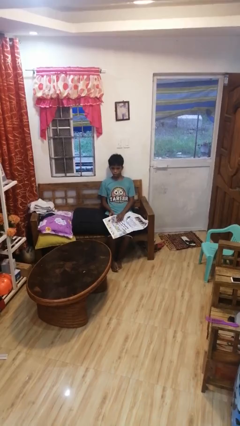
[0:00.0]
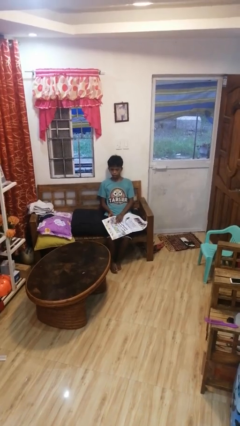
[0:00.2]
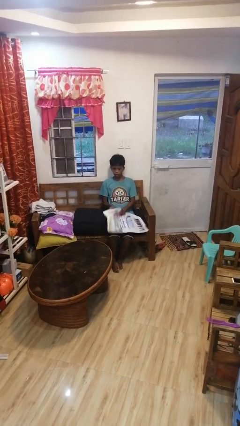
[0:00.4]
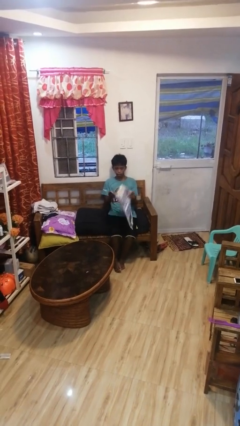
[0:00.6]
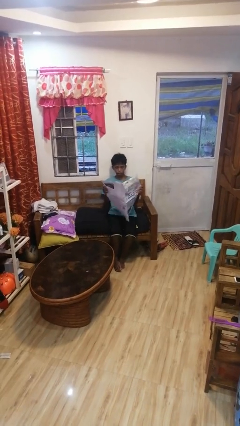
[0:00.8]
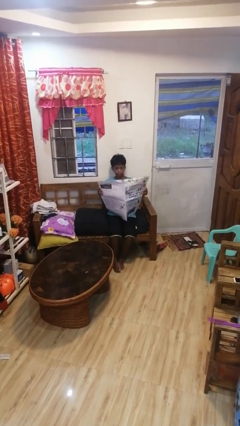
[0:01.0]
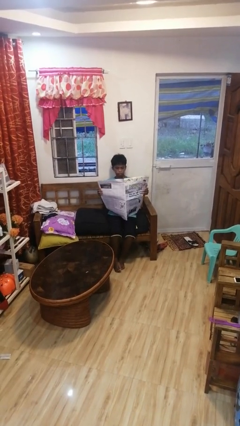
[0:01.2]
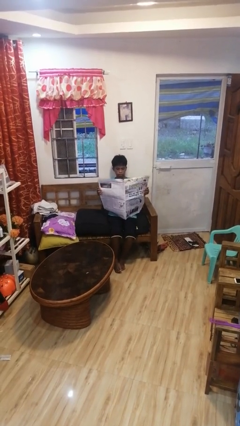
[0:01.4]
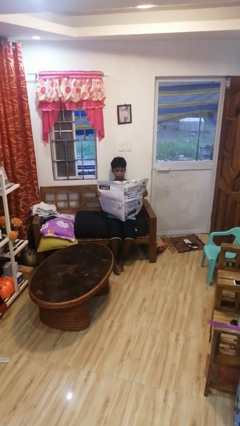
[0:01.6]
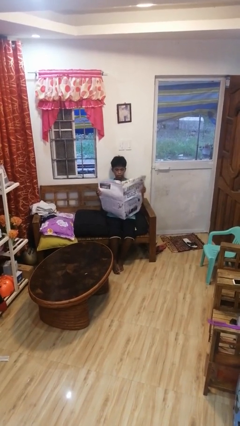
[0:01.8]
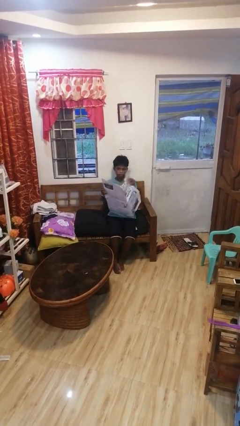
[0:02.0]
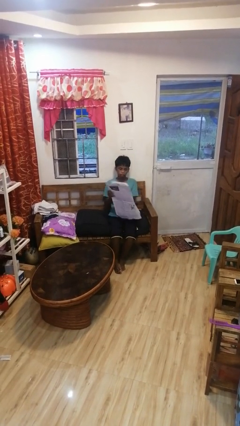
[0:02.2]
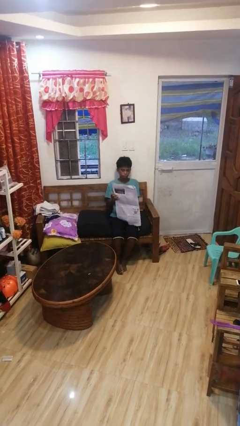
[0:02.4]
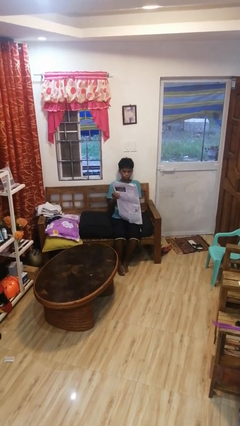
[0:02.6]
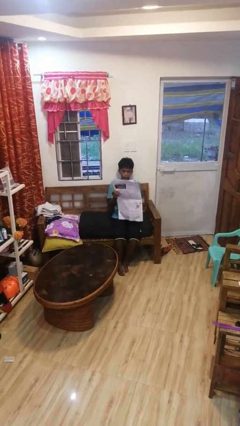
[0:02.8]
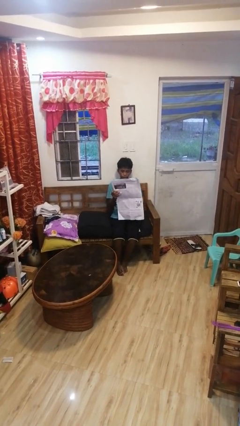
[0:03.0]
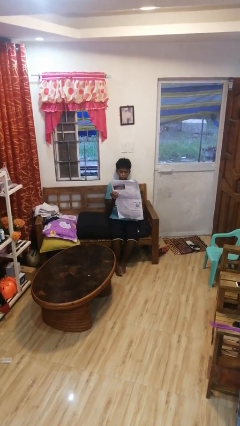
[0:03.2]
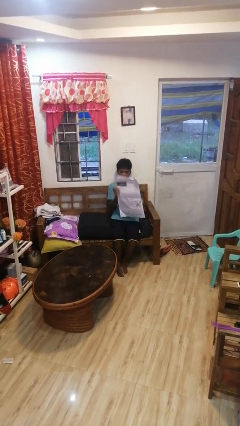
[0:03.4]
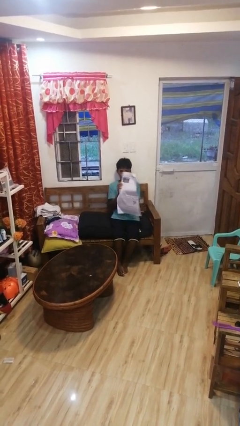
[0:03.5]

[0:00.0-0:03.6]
person reads newspaper

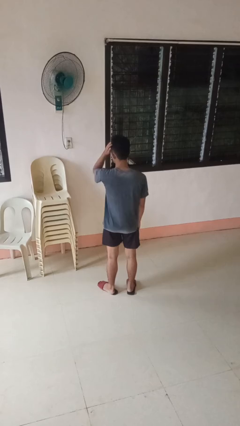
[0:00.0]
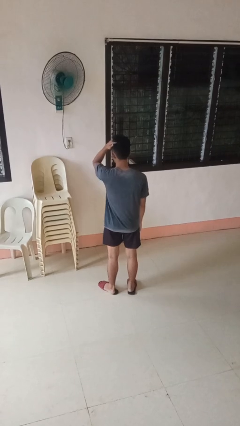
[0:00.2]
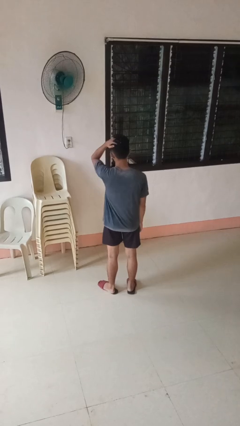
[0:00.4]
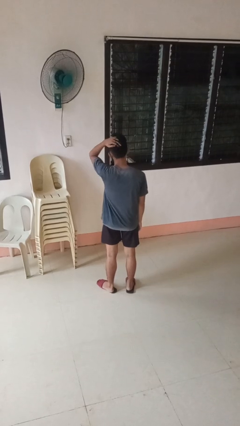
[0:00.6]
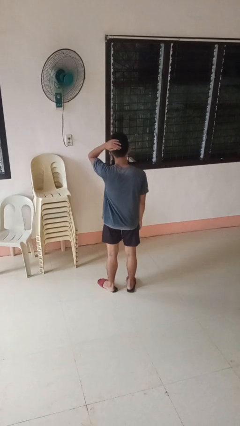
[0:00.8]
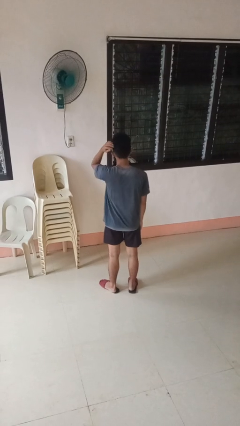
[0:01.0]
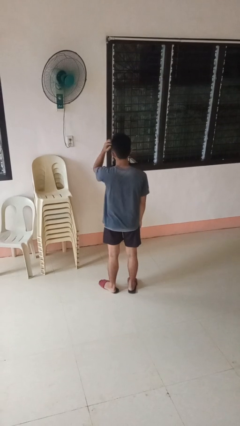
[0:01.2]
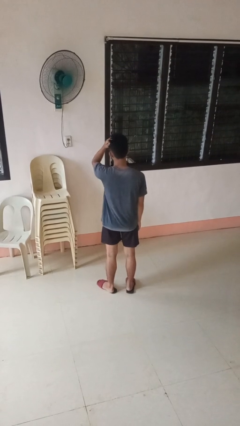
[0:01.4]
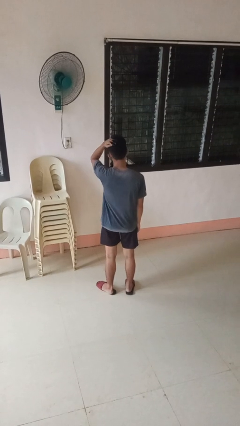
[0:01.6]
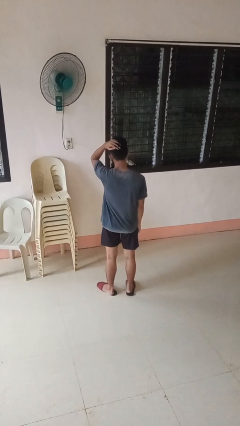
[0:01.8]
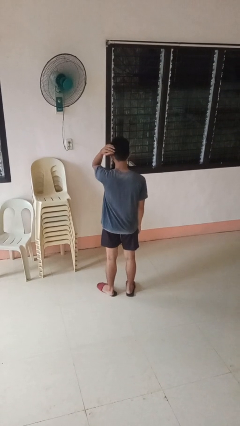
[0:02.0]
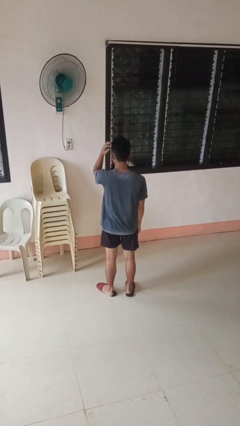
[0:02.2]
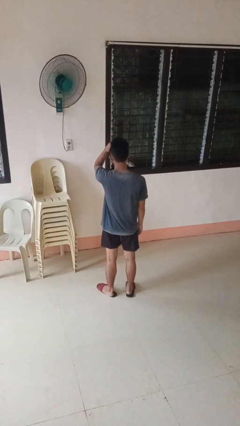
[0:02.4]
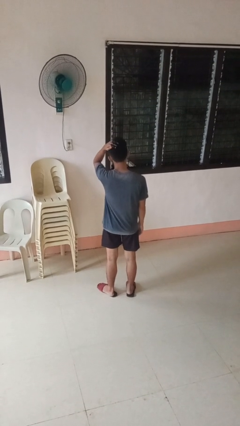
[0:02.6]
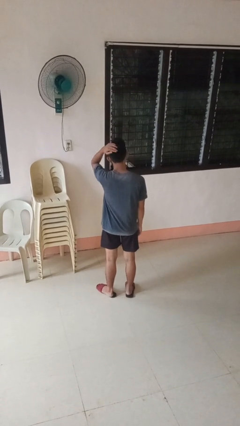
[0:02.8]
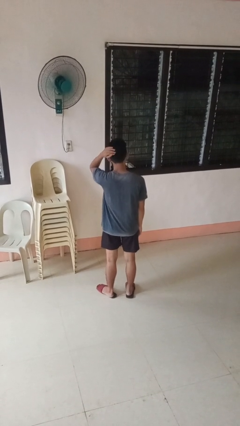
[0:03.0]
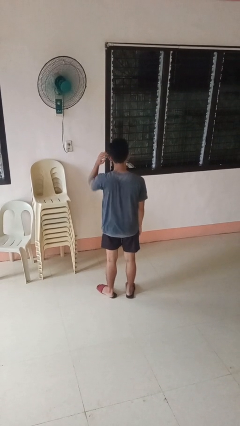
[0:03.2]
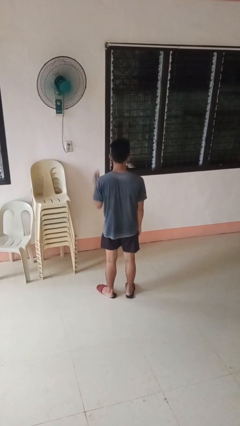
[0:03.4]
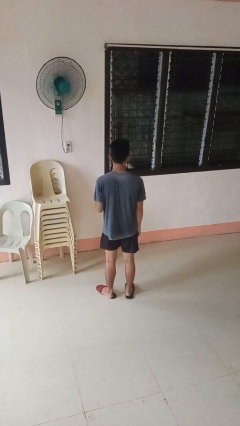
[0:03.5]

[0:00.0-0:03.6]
person strokes hair

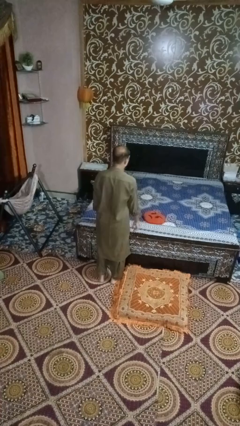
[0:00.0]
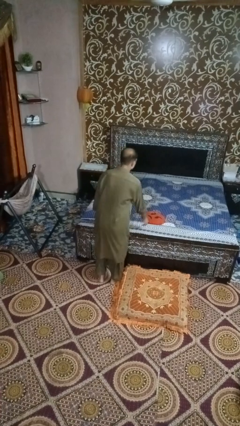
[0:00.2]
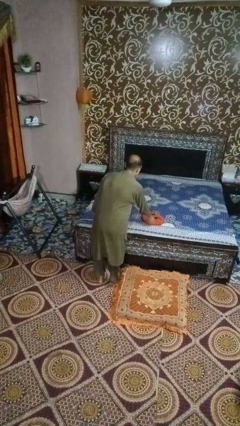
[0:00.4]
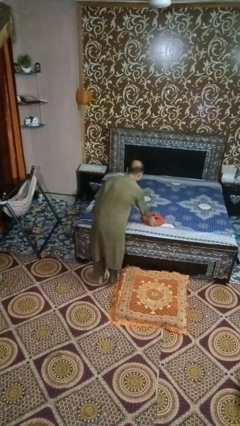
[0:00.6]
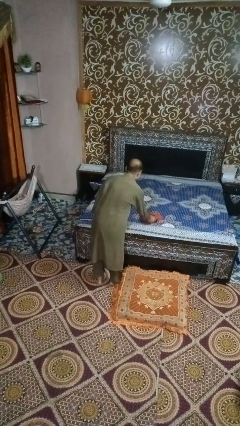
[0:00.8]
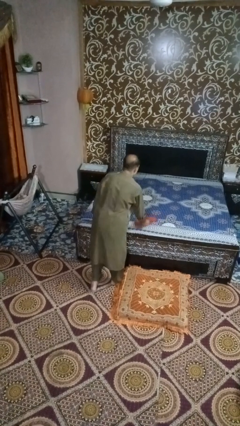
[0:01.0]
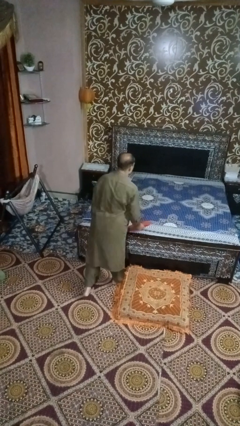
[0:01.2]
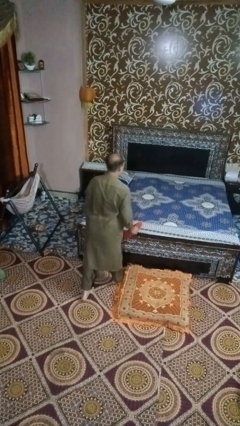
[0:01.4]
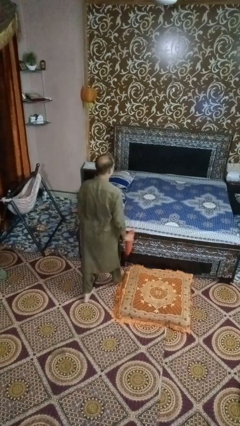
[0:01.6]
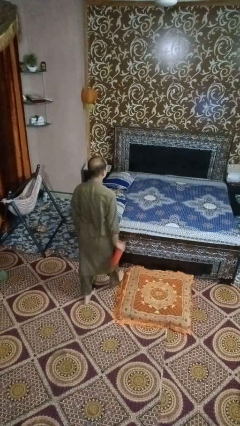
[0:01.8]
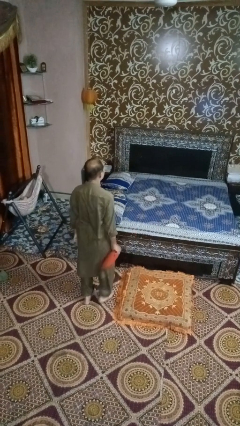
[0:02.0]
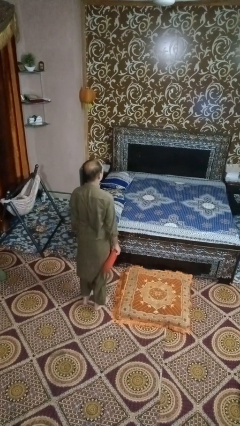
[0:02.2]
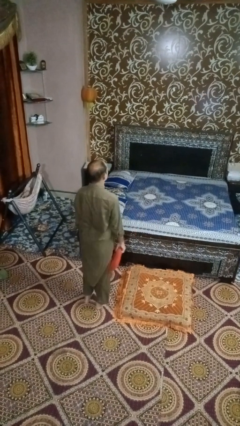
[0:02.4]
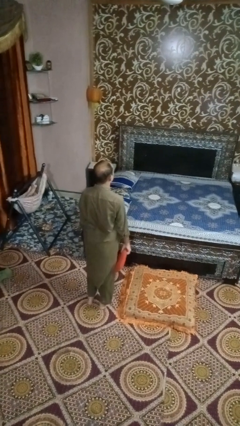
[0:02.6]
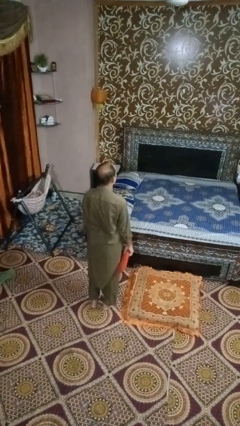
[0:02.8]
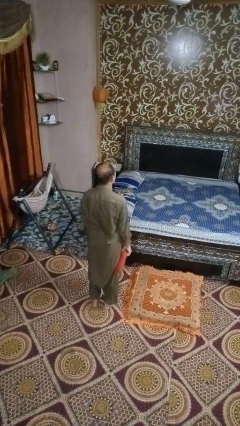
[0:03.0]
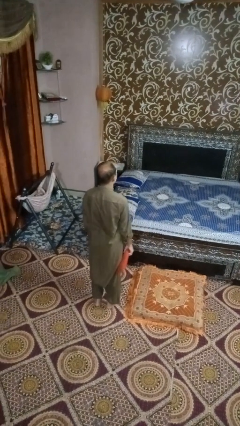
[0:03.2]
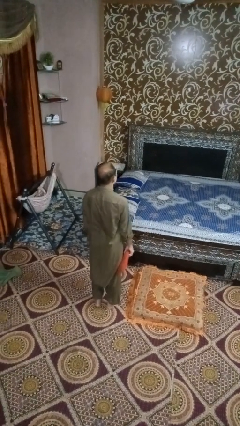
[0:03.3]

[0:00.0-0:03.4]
person picks up object from bed

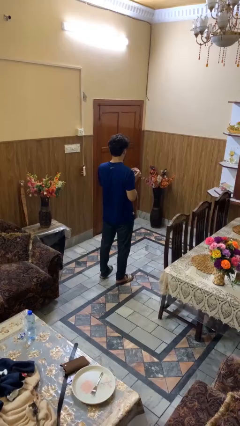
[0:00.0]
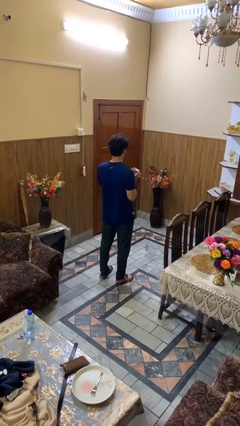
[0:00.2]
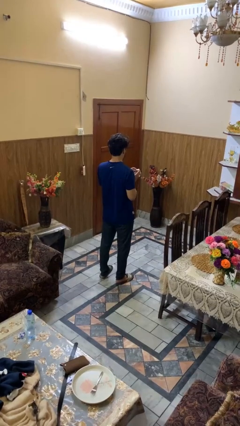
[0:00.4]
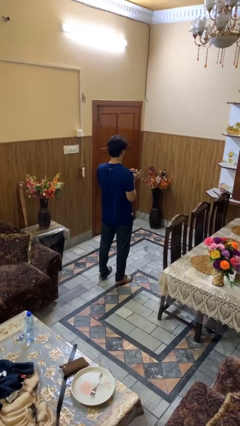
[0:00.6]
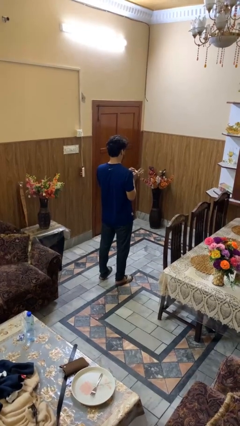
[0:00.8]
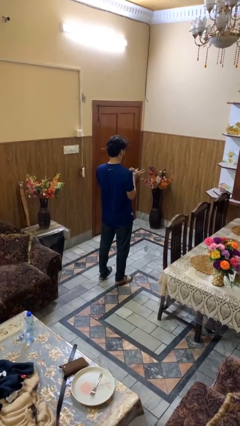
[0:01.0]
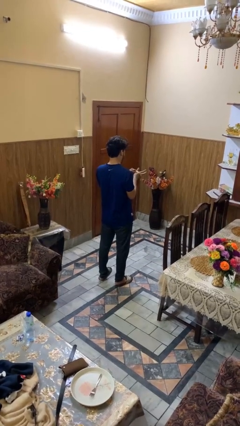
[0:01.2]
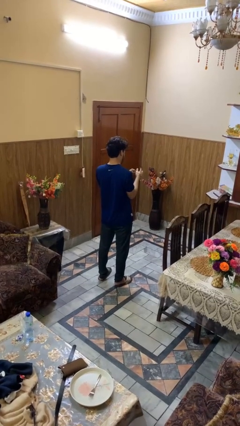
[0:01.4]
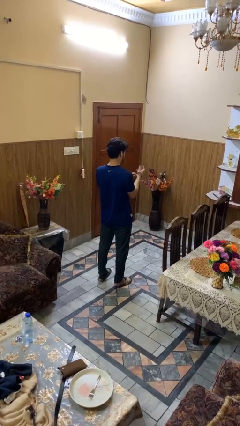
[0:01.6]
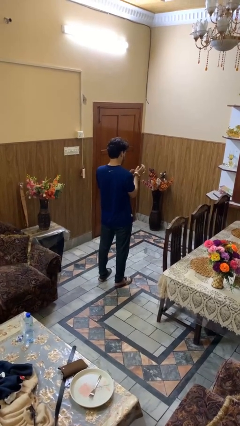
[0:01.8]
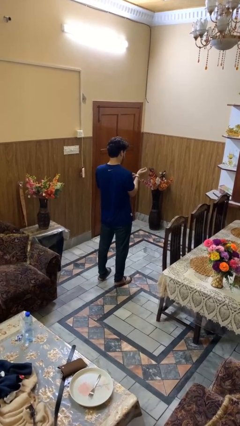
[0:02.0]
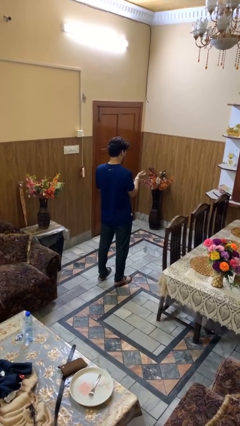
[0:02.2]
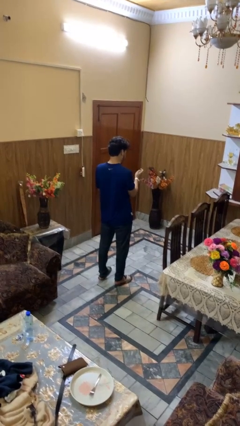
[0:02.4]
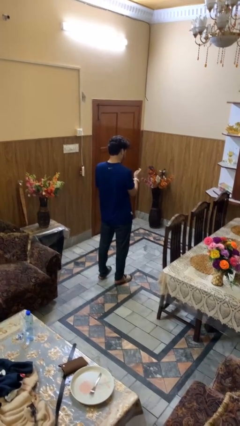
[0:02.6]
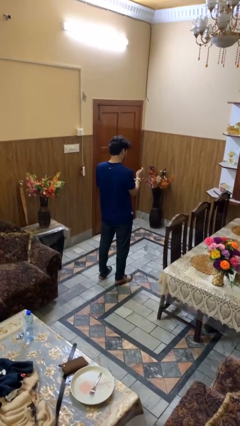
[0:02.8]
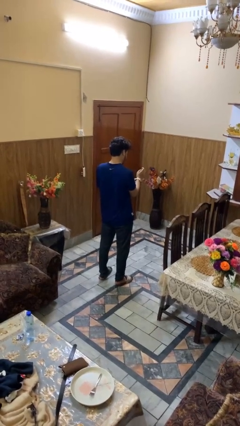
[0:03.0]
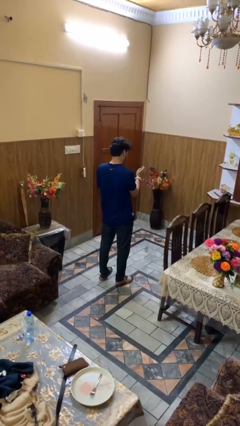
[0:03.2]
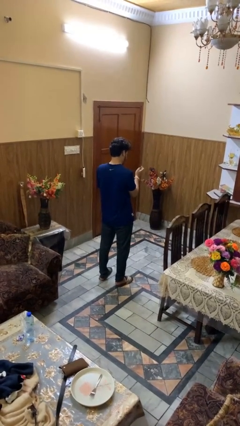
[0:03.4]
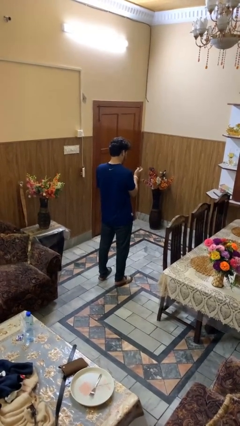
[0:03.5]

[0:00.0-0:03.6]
person puts on wristwatch

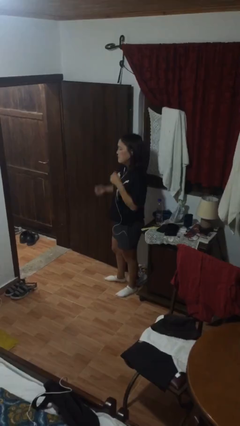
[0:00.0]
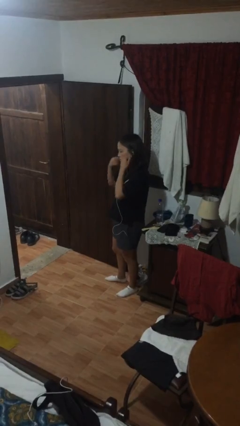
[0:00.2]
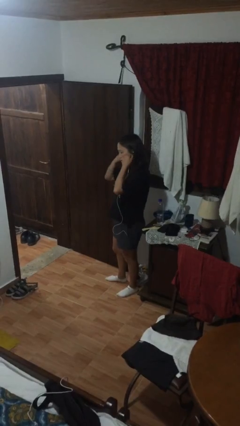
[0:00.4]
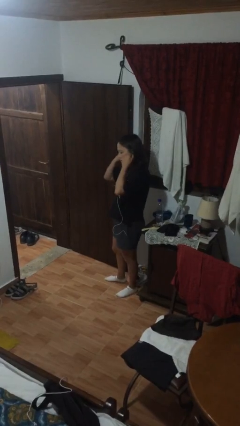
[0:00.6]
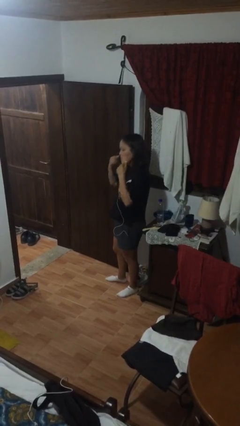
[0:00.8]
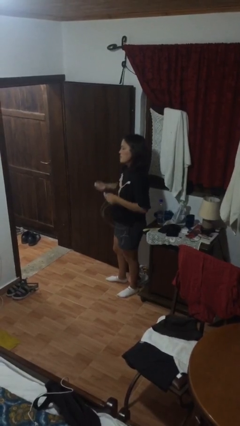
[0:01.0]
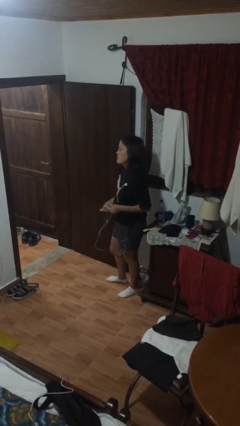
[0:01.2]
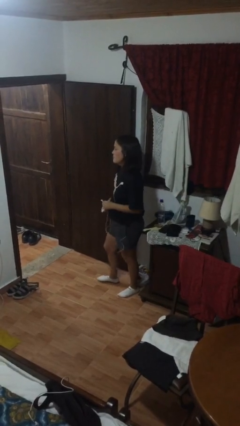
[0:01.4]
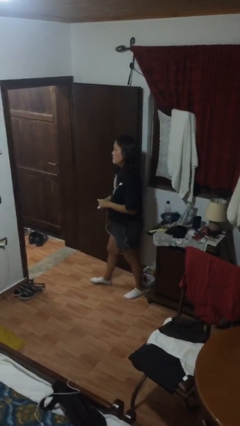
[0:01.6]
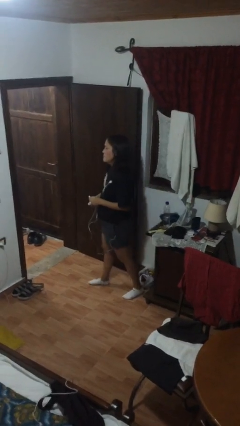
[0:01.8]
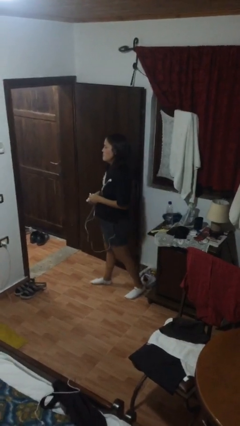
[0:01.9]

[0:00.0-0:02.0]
person takes off headphones

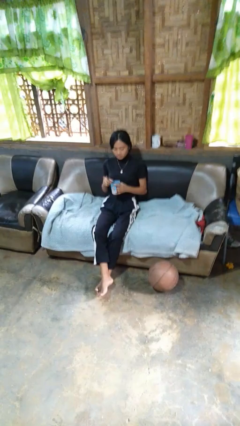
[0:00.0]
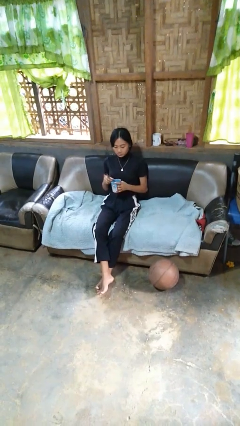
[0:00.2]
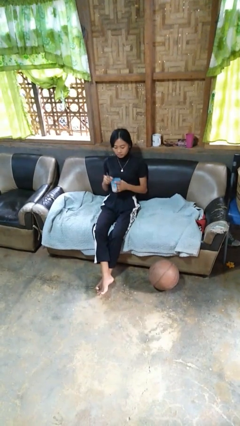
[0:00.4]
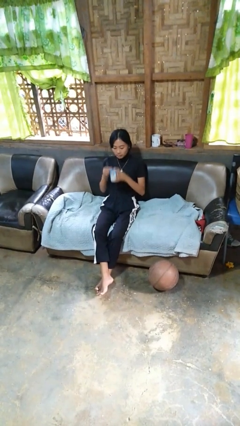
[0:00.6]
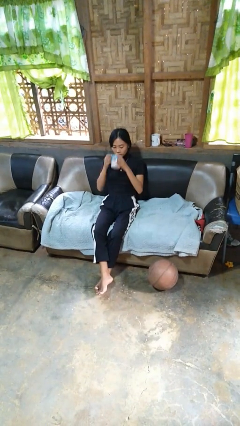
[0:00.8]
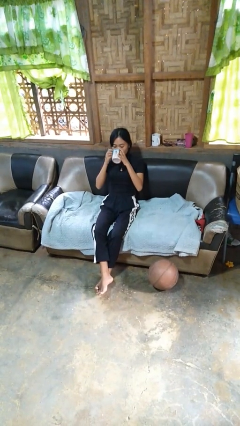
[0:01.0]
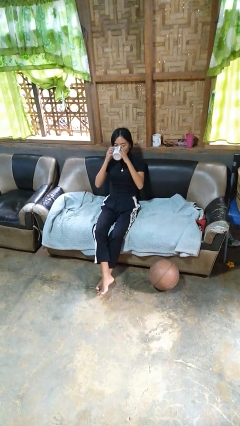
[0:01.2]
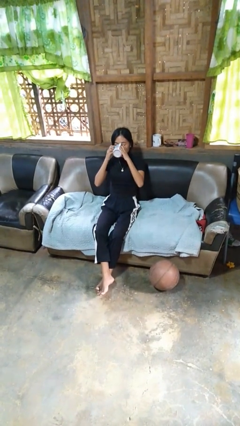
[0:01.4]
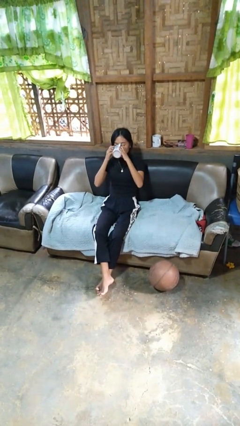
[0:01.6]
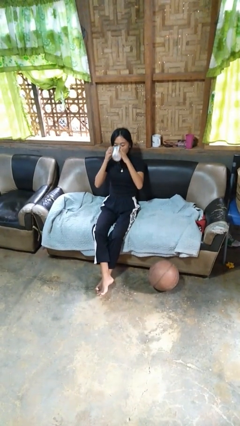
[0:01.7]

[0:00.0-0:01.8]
person drinks from mug
